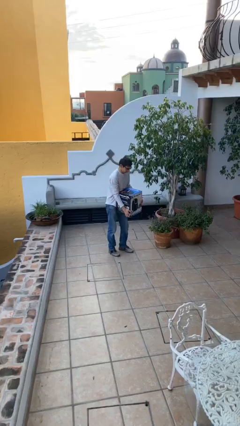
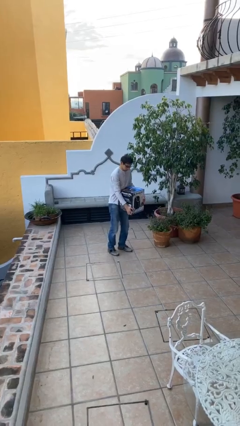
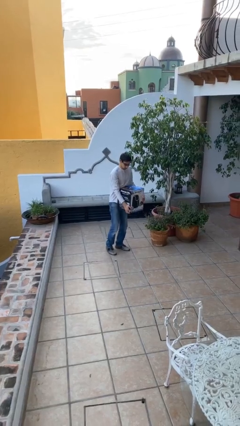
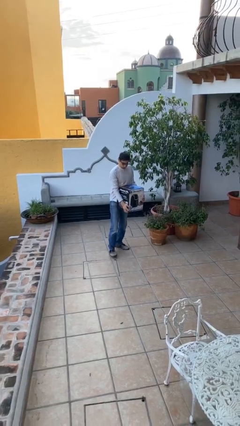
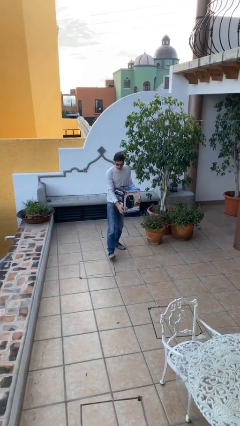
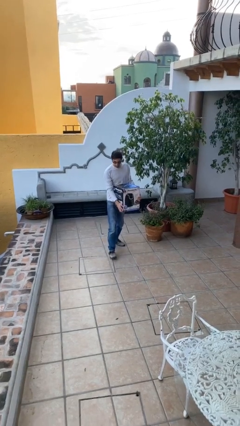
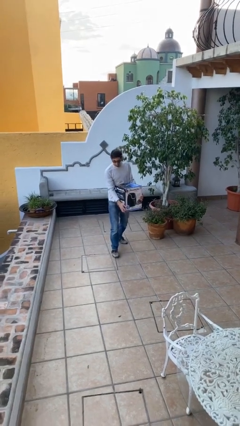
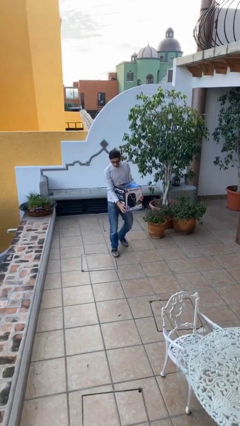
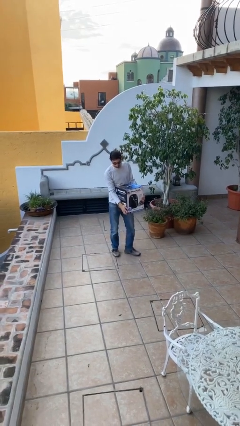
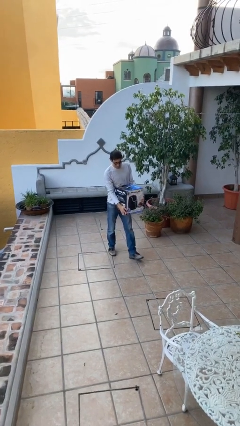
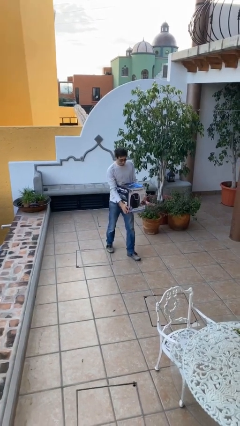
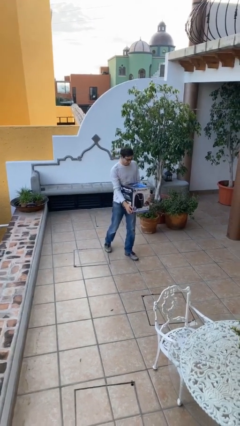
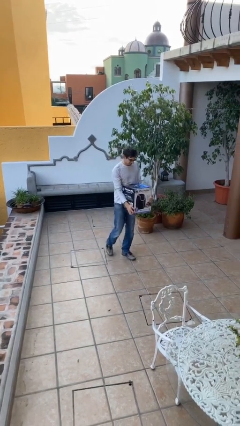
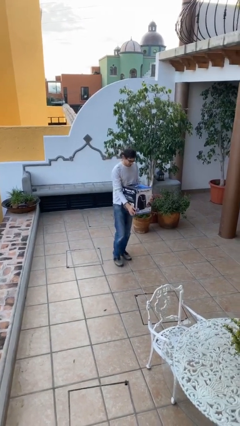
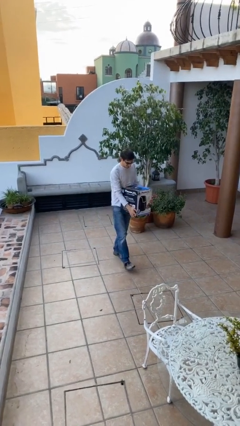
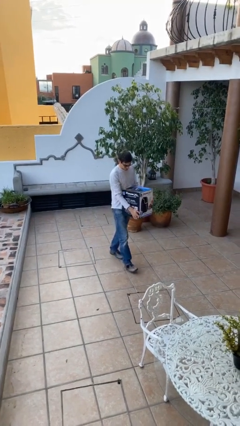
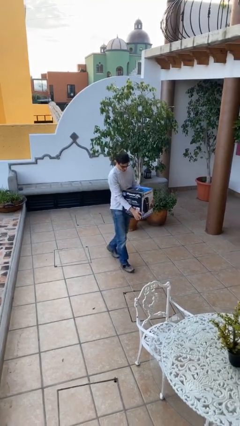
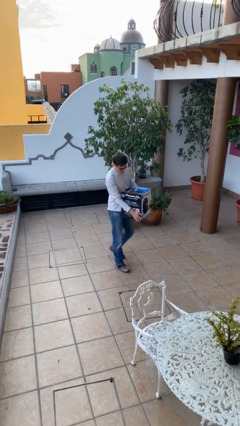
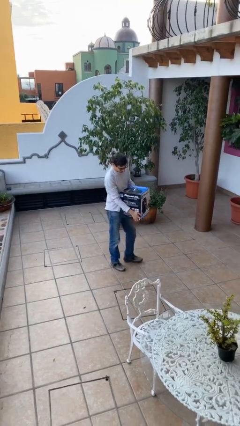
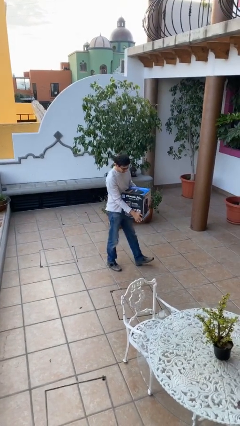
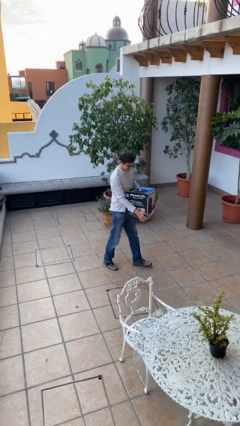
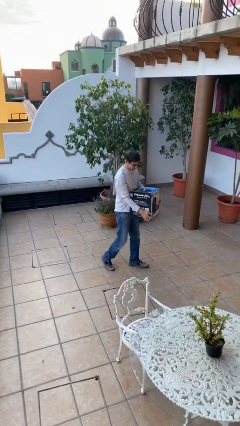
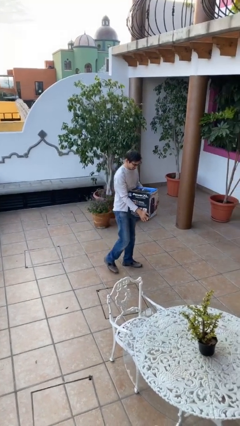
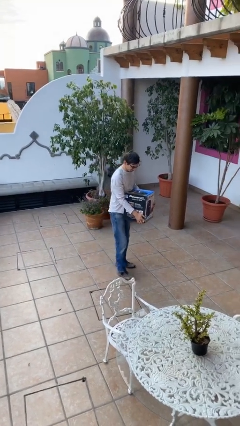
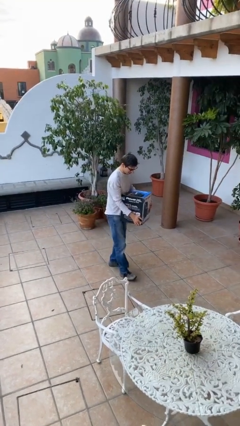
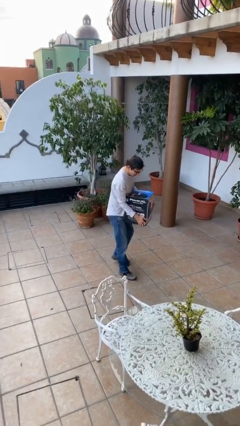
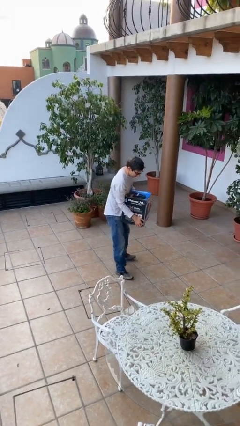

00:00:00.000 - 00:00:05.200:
person carries heavy object

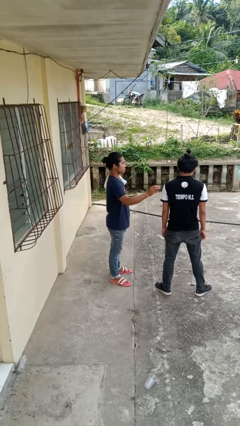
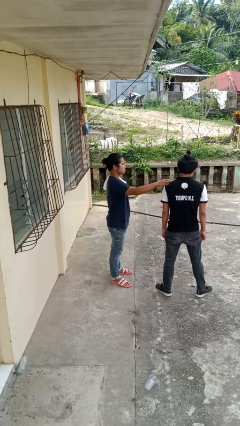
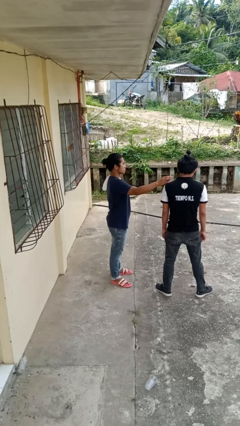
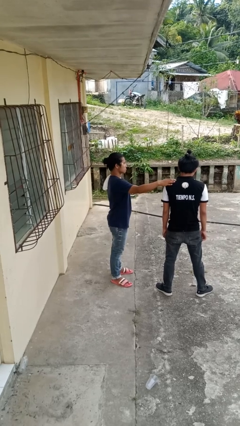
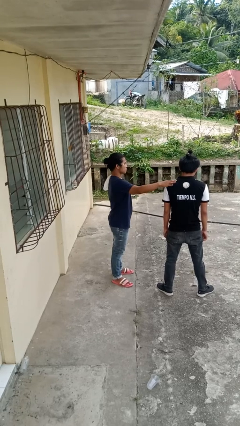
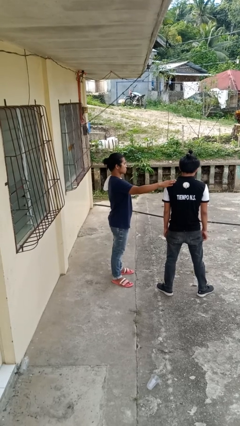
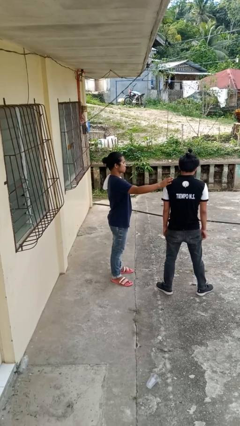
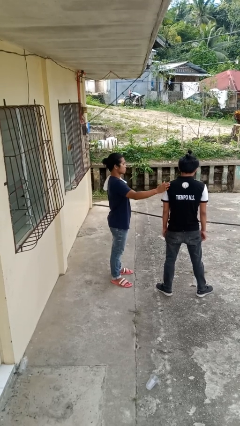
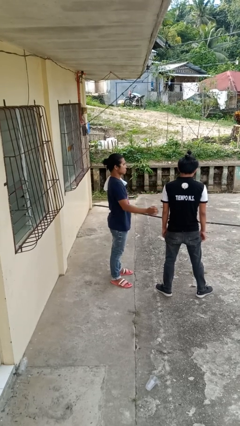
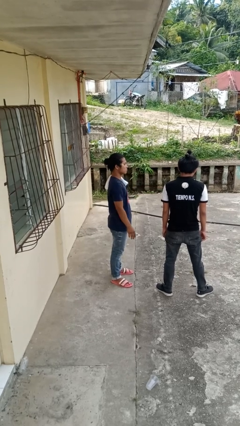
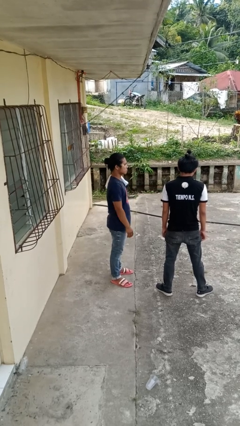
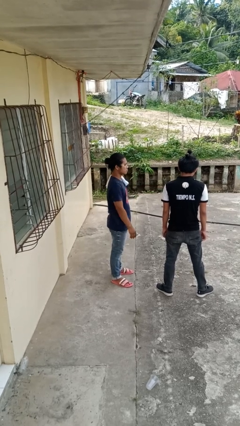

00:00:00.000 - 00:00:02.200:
person pounds shoulders of person

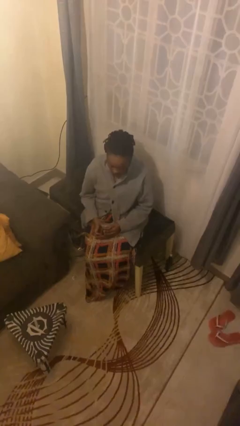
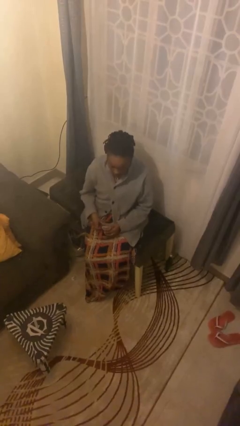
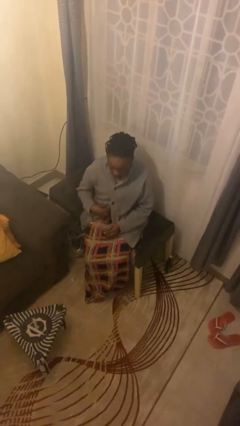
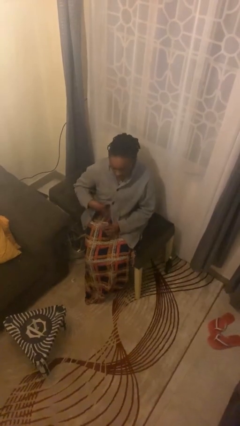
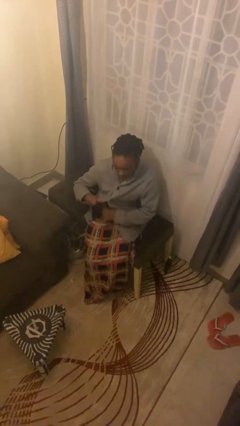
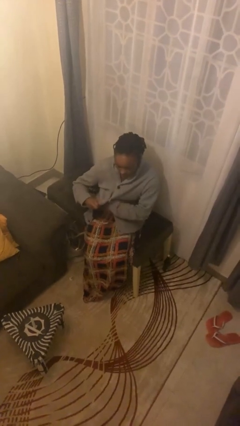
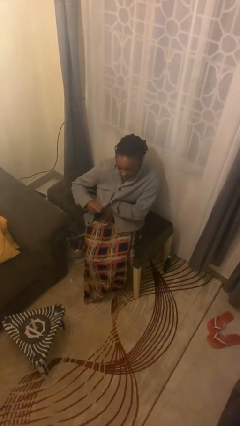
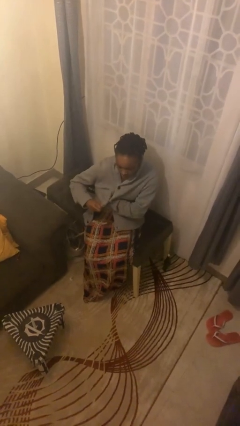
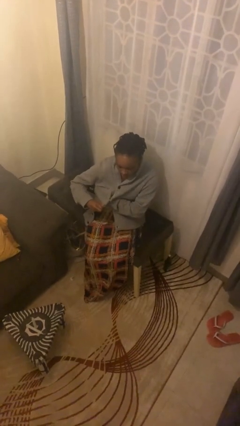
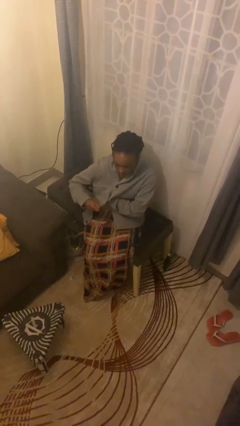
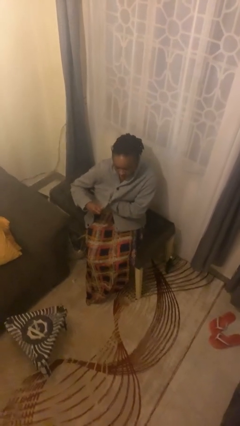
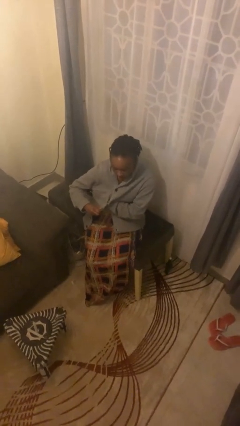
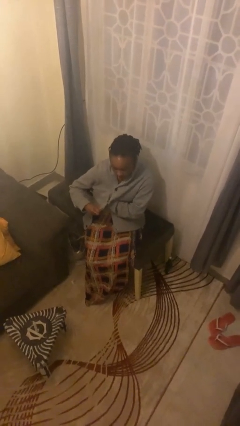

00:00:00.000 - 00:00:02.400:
person applies deodorant

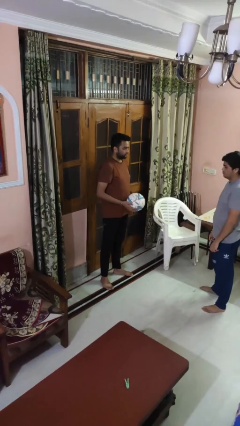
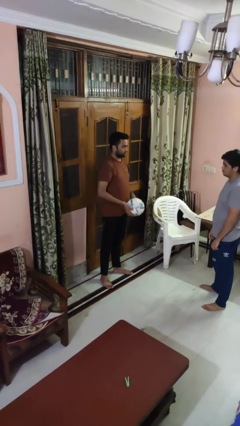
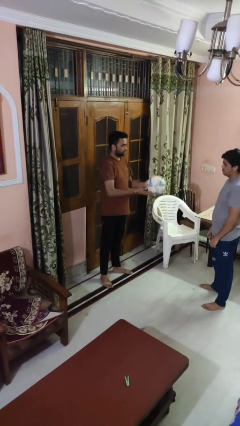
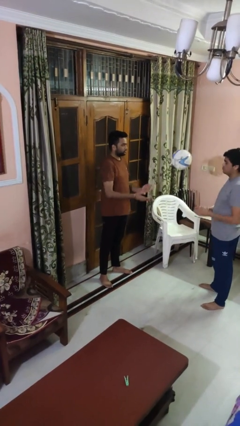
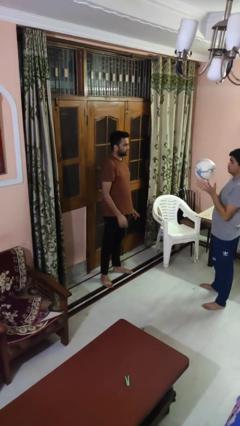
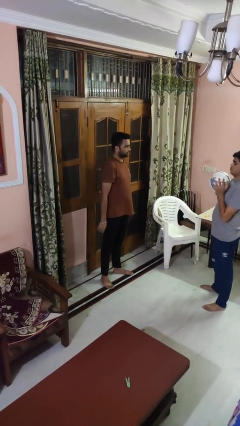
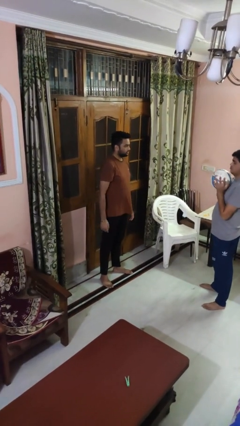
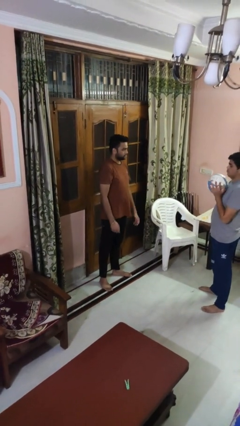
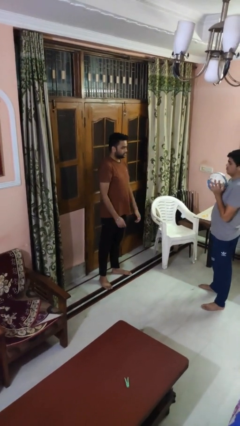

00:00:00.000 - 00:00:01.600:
person throws object to person

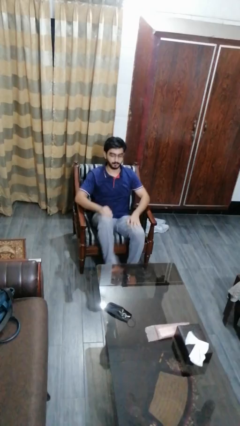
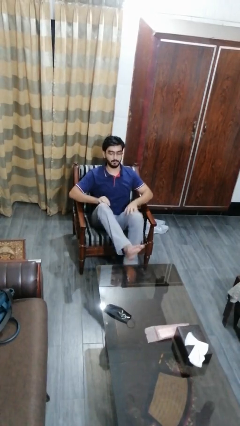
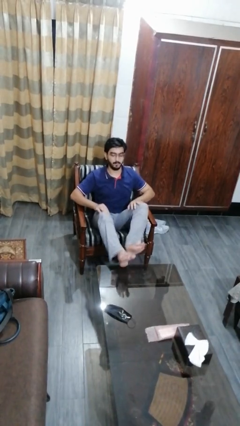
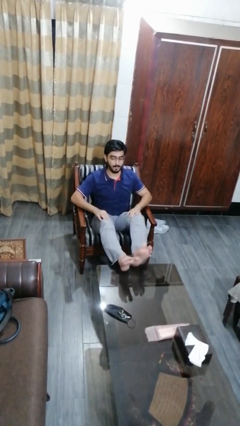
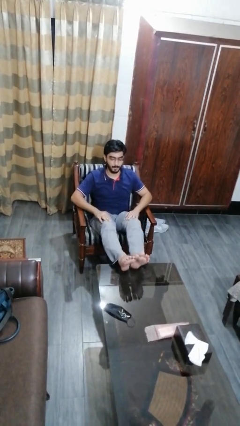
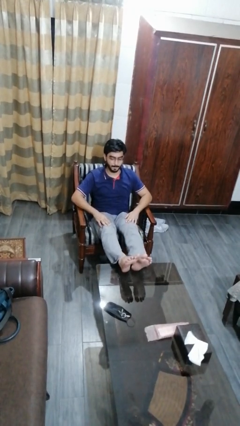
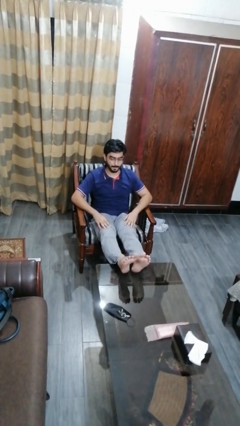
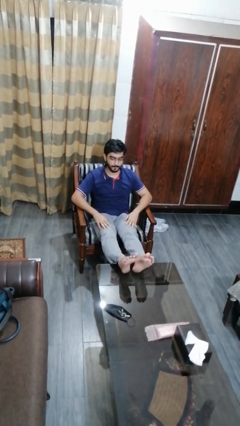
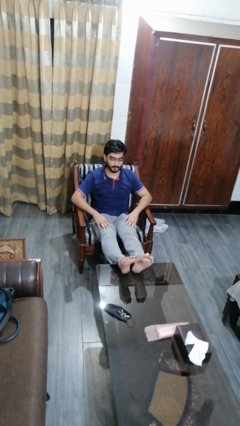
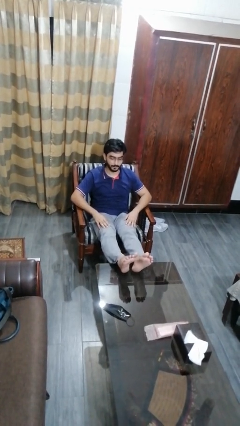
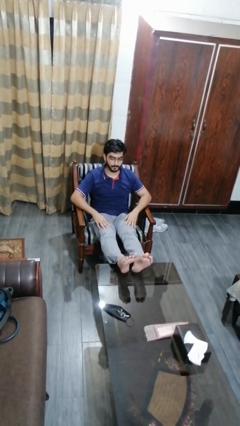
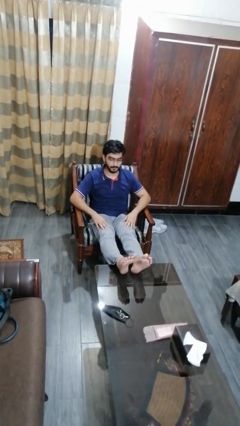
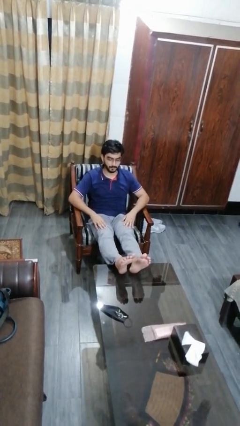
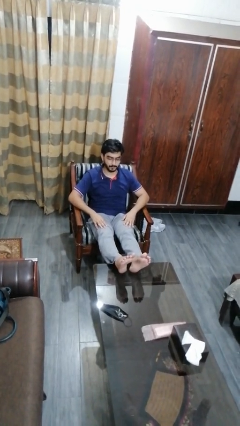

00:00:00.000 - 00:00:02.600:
person puts feet up

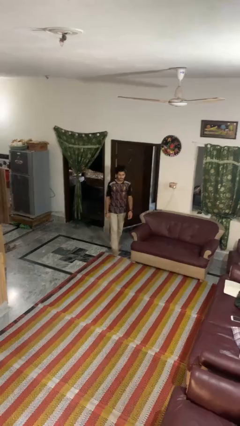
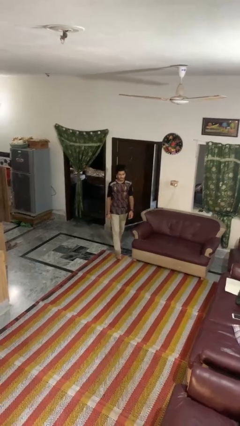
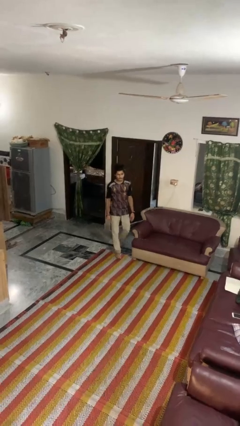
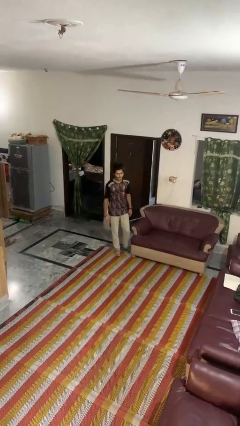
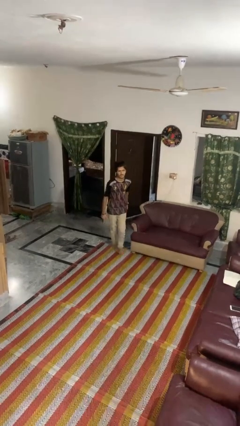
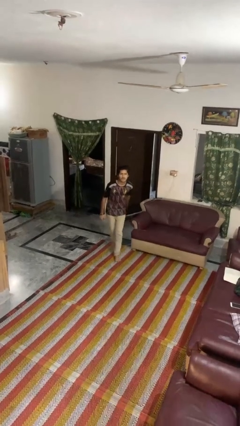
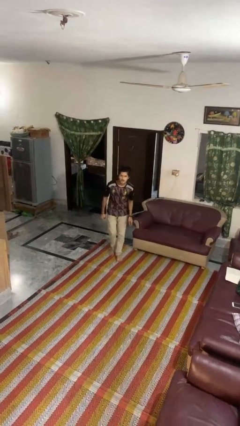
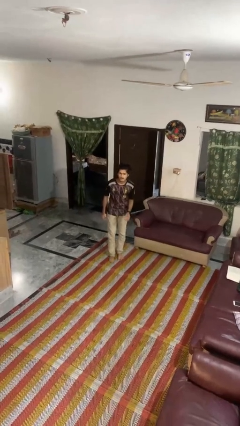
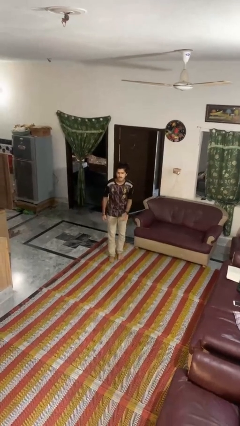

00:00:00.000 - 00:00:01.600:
person stubs toe

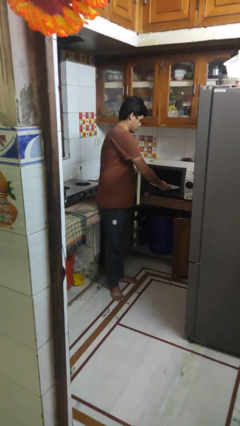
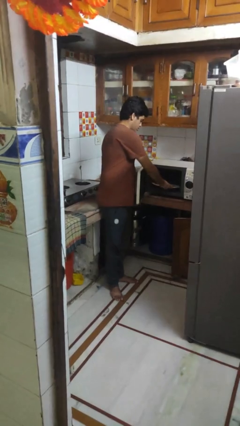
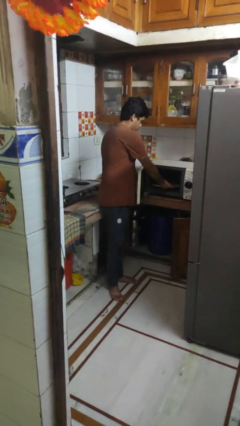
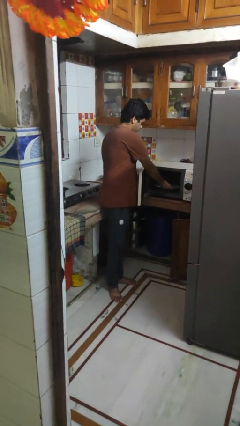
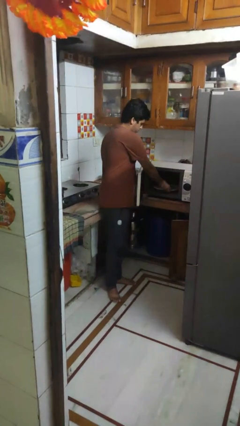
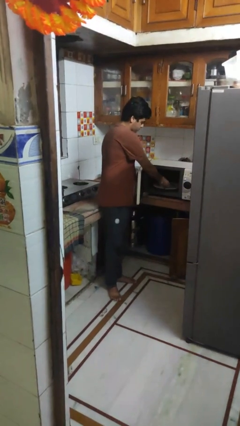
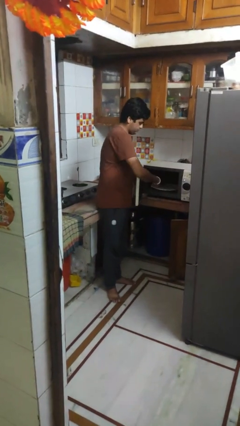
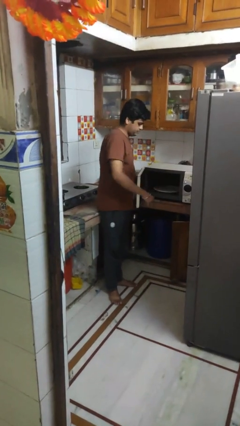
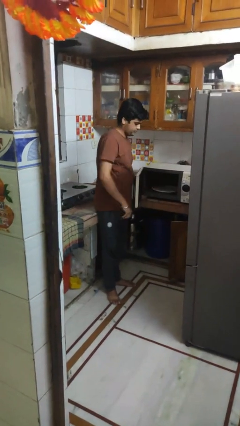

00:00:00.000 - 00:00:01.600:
person puts object into microwave

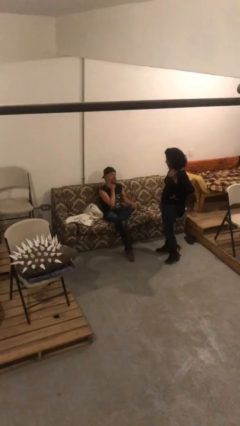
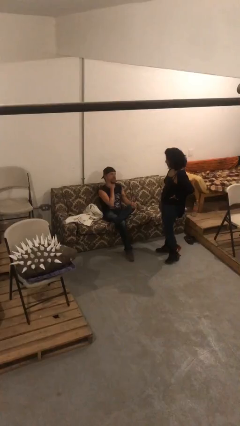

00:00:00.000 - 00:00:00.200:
person shakes hand
